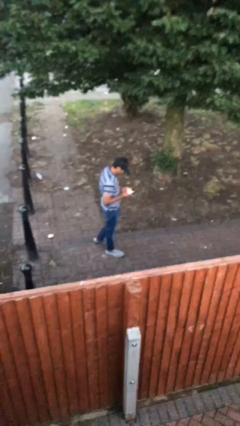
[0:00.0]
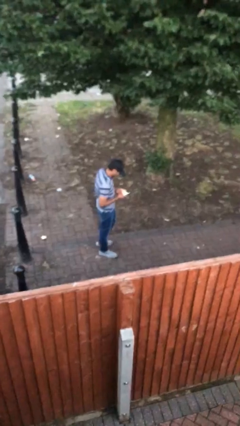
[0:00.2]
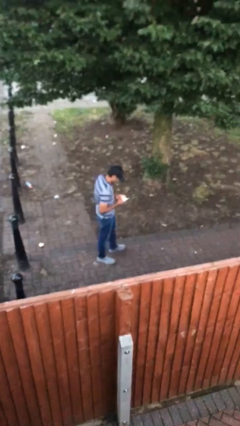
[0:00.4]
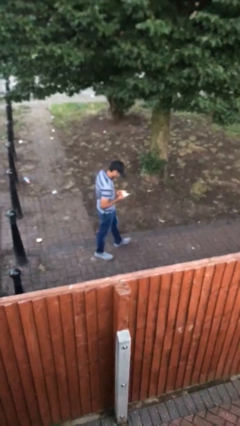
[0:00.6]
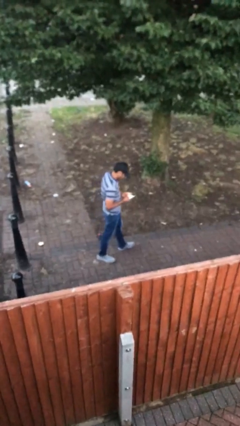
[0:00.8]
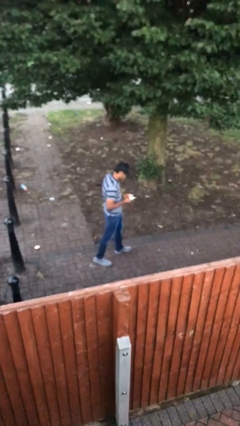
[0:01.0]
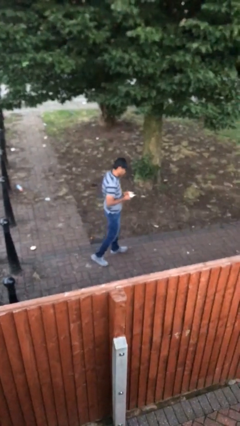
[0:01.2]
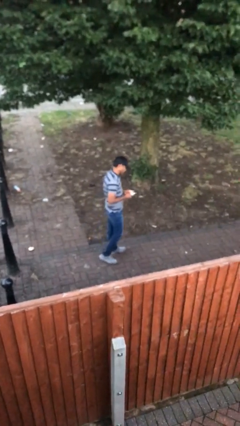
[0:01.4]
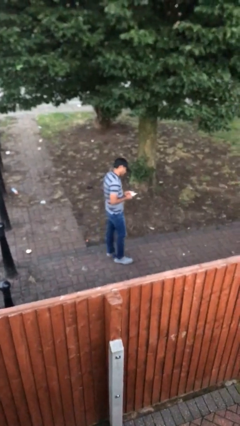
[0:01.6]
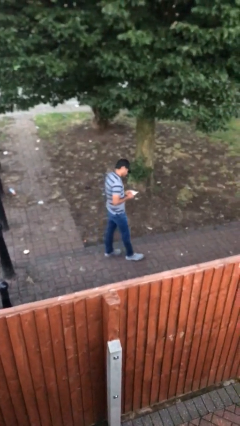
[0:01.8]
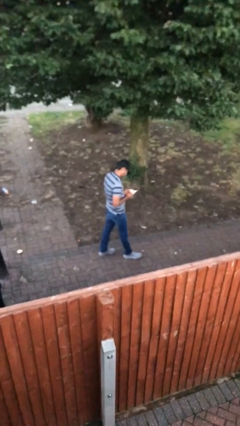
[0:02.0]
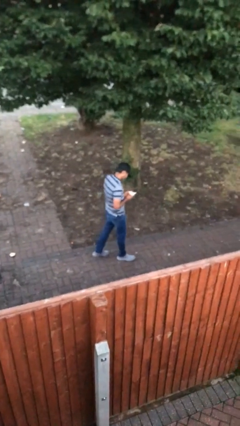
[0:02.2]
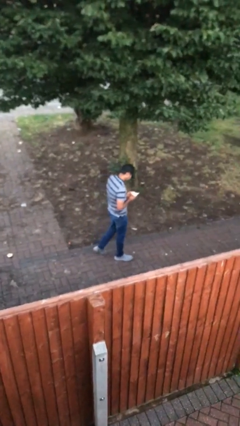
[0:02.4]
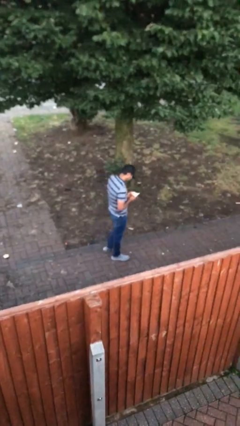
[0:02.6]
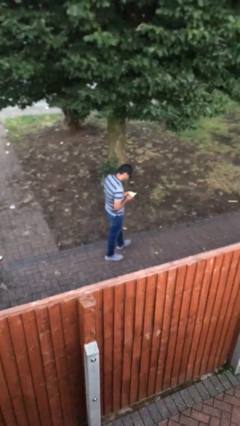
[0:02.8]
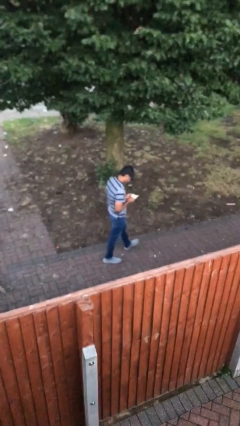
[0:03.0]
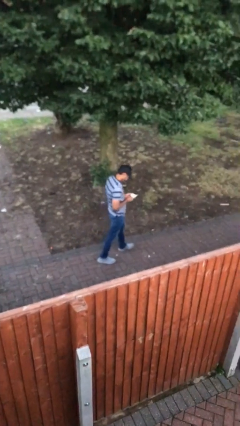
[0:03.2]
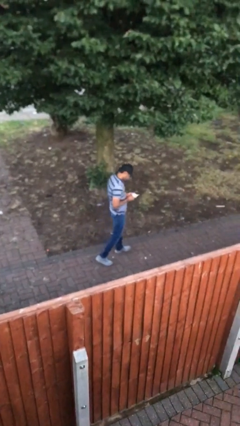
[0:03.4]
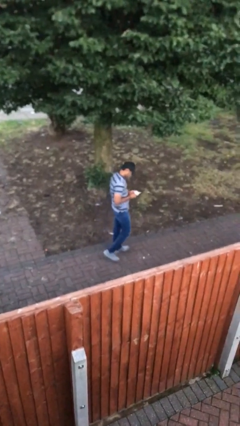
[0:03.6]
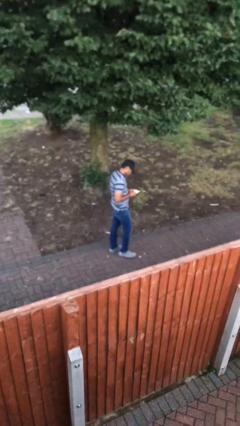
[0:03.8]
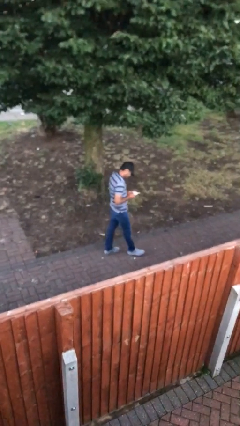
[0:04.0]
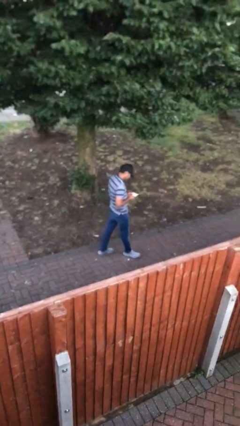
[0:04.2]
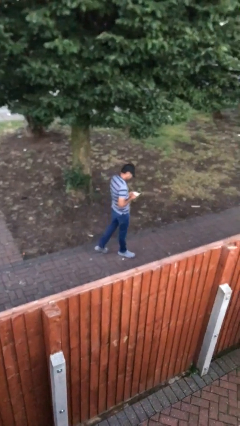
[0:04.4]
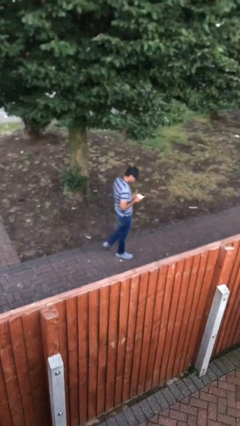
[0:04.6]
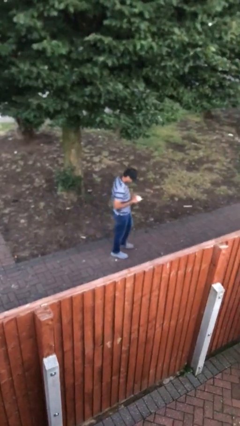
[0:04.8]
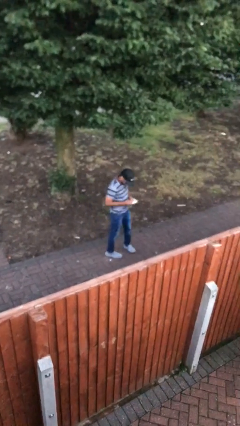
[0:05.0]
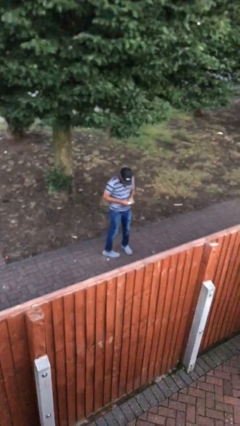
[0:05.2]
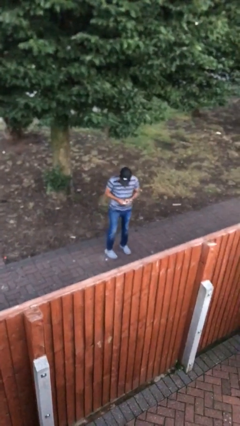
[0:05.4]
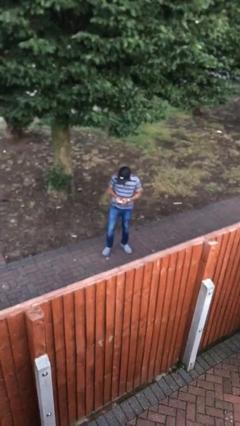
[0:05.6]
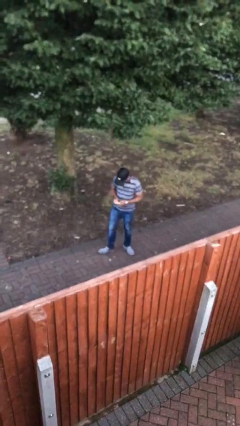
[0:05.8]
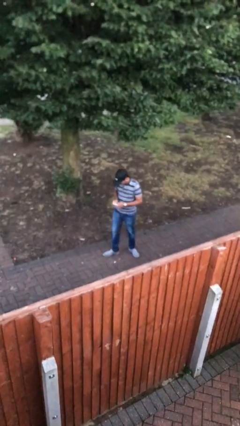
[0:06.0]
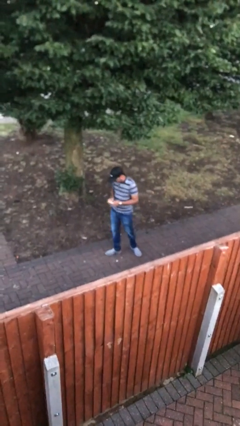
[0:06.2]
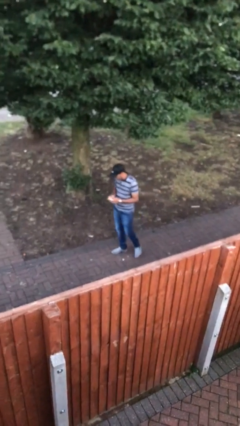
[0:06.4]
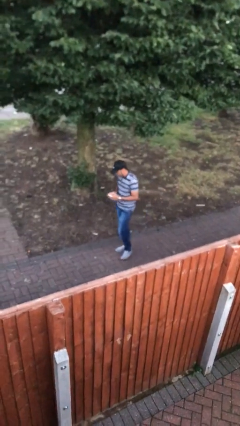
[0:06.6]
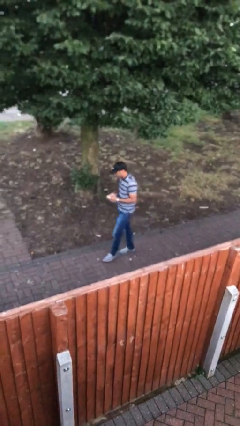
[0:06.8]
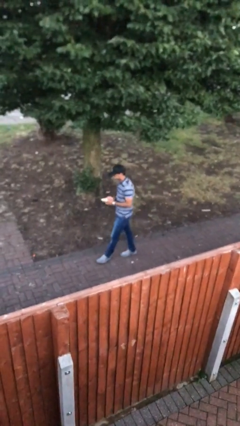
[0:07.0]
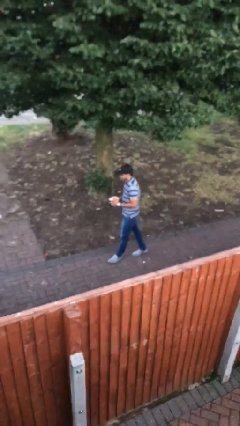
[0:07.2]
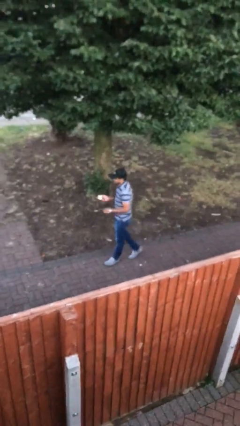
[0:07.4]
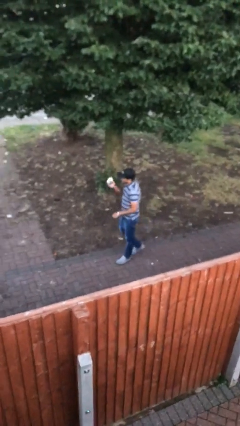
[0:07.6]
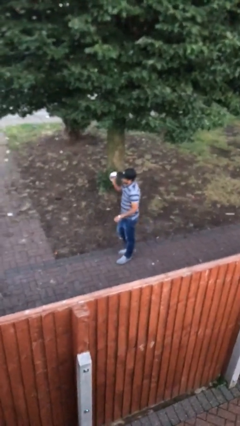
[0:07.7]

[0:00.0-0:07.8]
person texts on phone

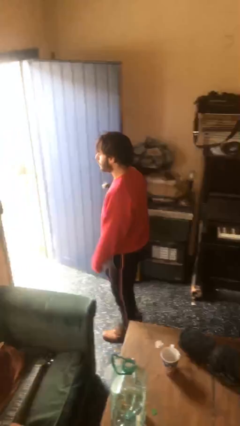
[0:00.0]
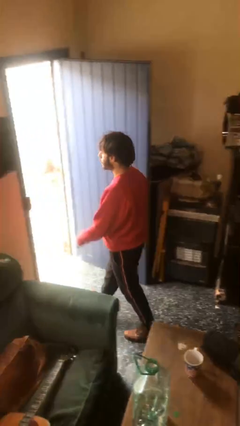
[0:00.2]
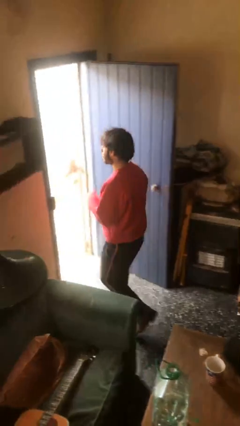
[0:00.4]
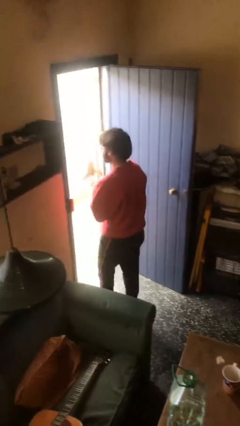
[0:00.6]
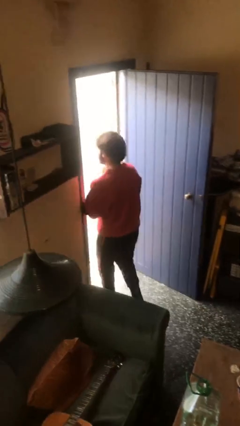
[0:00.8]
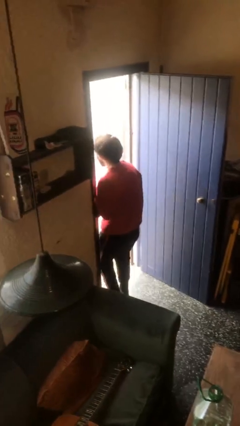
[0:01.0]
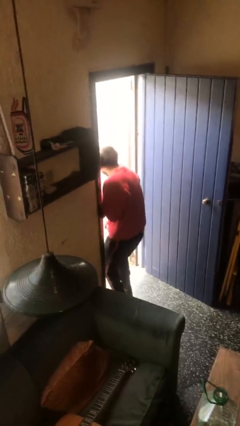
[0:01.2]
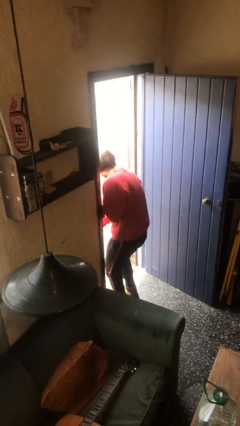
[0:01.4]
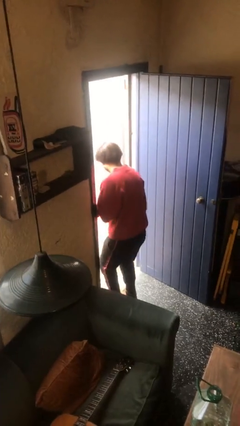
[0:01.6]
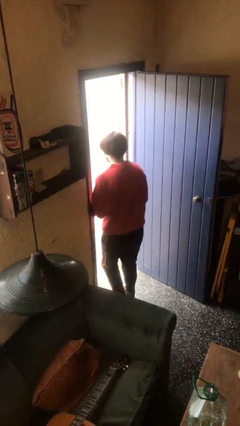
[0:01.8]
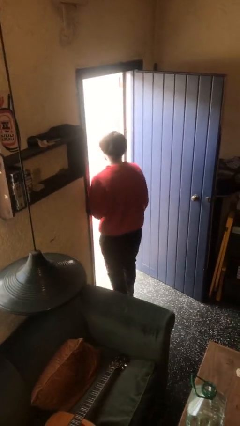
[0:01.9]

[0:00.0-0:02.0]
person bumps into wall

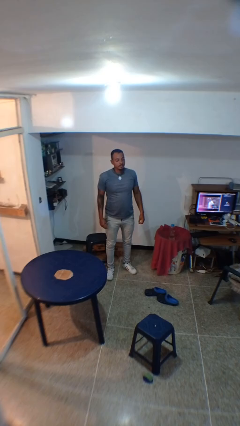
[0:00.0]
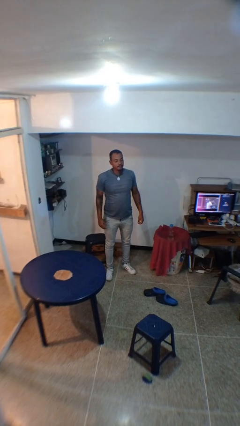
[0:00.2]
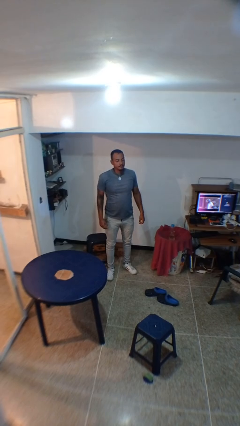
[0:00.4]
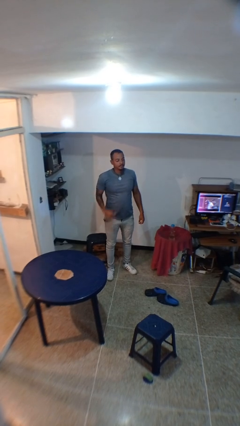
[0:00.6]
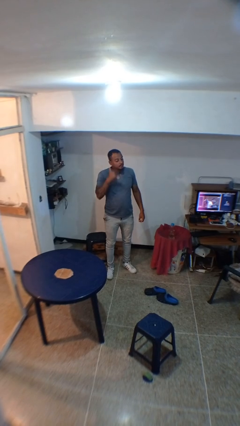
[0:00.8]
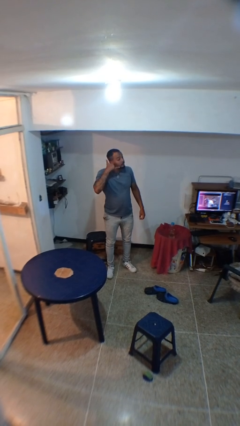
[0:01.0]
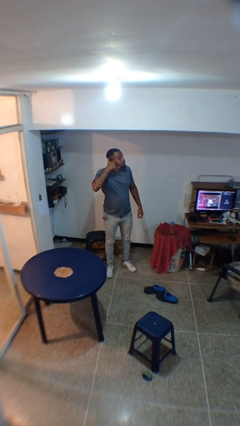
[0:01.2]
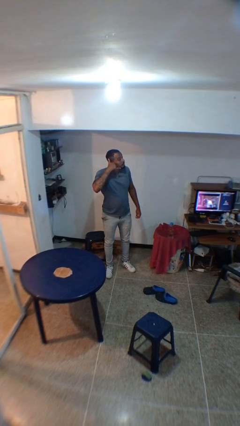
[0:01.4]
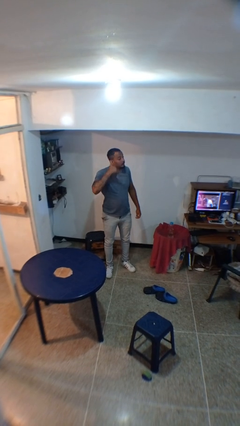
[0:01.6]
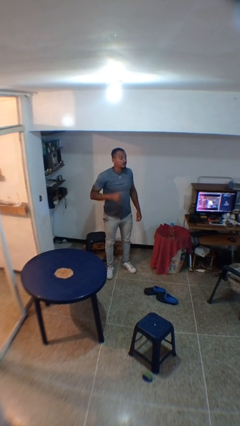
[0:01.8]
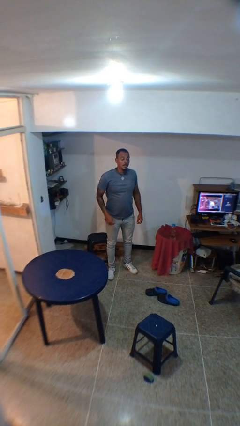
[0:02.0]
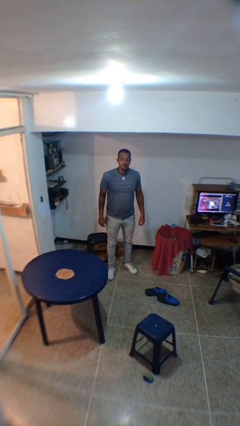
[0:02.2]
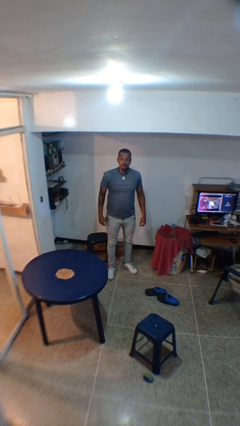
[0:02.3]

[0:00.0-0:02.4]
person gestures call me

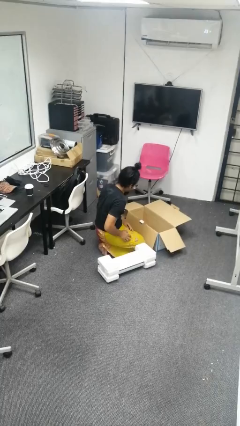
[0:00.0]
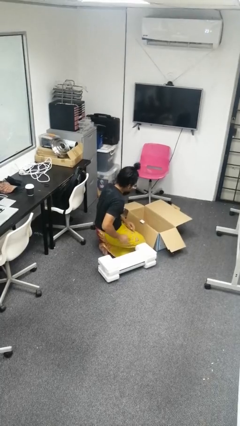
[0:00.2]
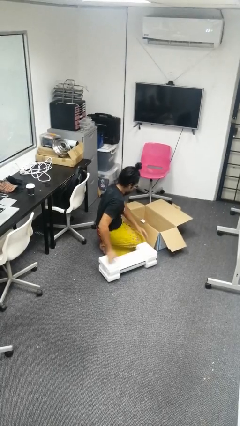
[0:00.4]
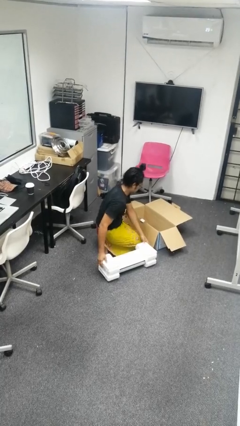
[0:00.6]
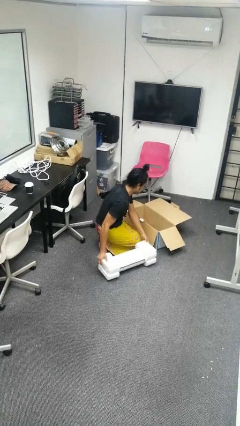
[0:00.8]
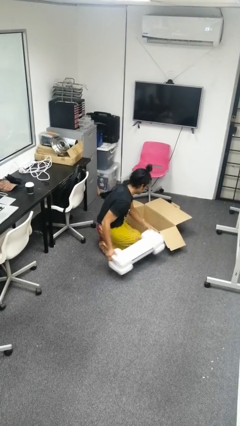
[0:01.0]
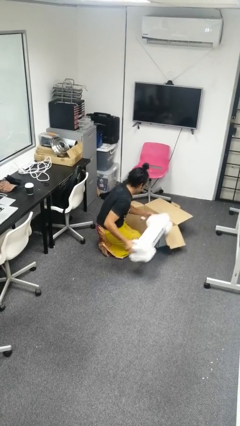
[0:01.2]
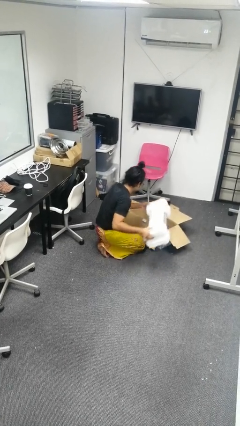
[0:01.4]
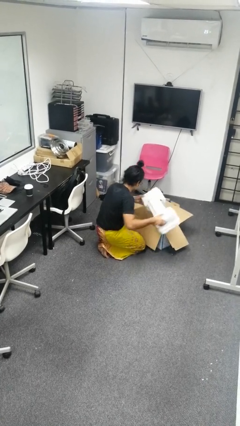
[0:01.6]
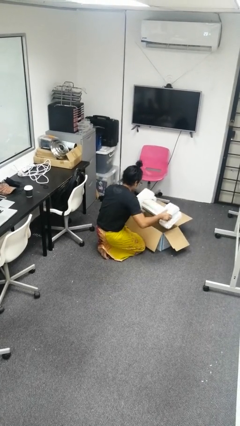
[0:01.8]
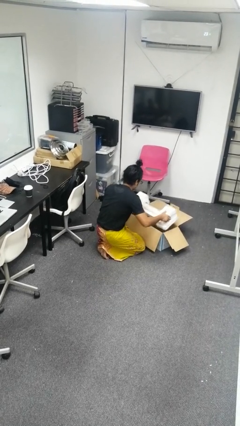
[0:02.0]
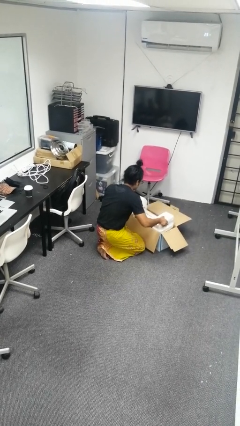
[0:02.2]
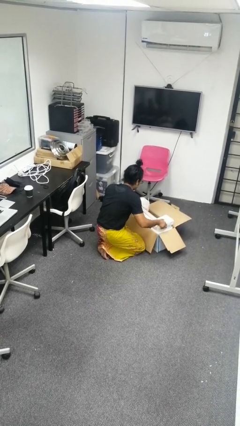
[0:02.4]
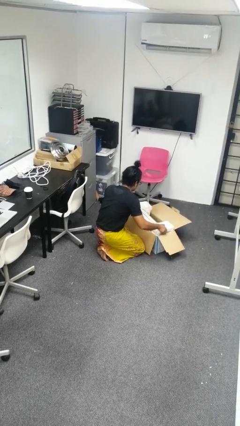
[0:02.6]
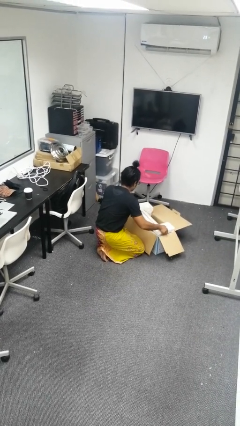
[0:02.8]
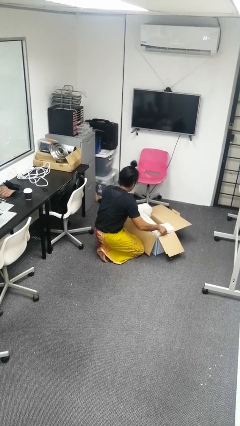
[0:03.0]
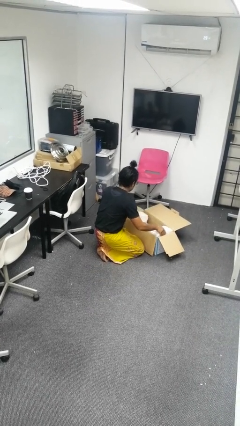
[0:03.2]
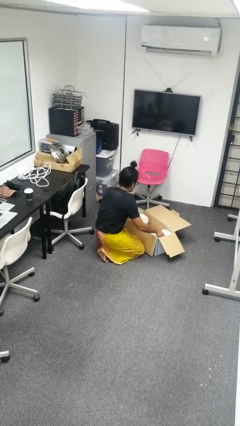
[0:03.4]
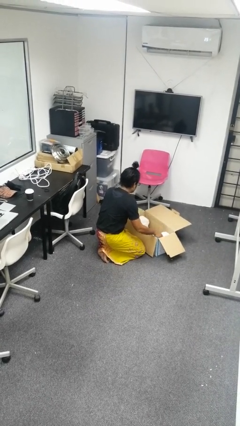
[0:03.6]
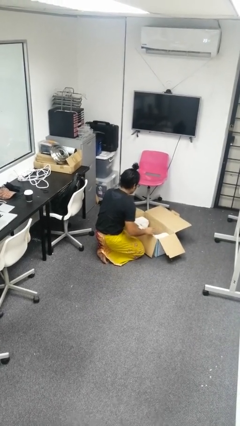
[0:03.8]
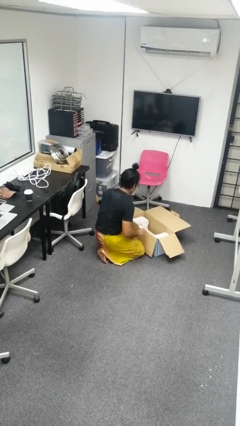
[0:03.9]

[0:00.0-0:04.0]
person puts object into box

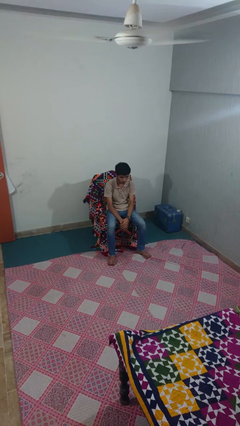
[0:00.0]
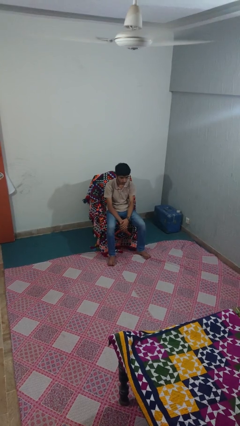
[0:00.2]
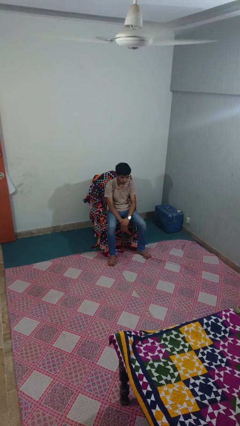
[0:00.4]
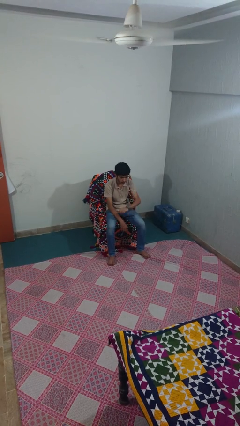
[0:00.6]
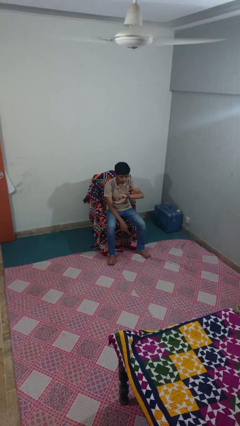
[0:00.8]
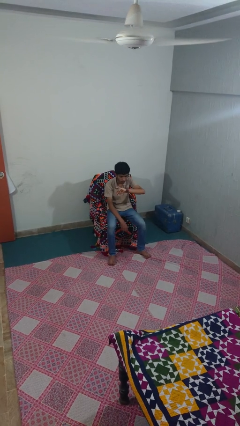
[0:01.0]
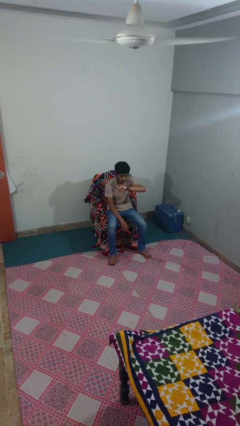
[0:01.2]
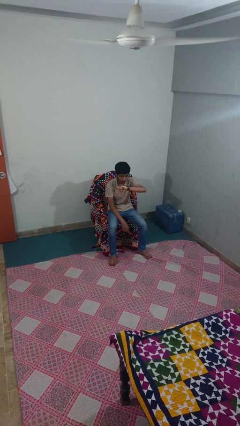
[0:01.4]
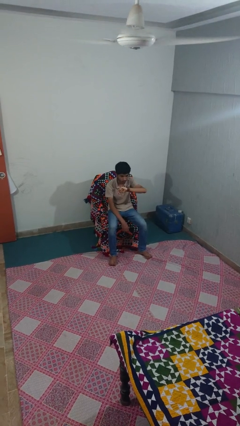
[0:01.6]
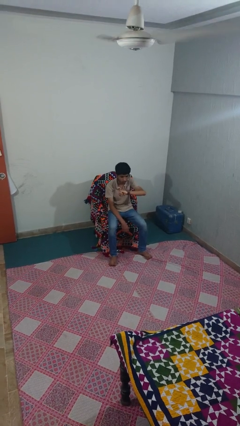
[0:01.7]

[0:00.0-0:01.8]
person looks at wristwatch
